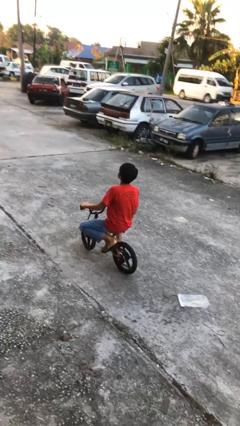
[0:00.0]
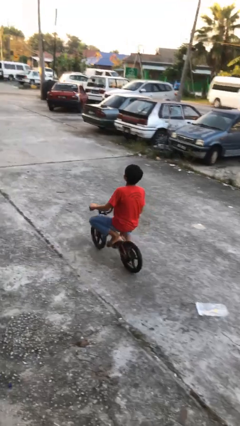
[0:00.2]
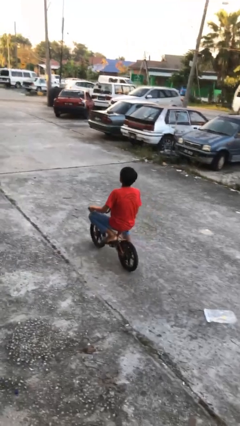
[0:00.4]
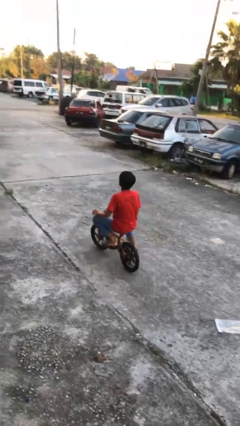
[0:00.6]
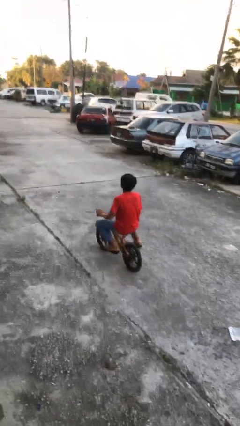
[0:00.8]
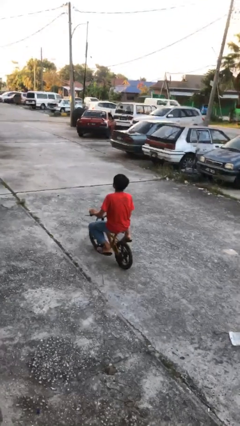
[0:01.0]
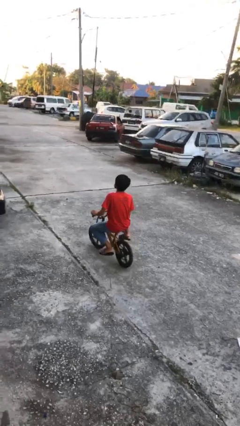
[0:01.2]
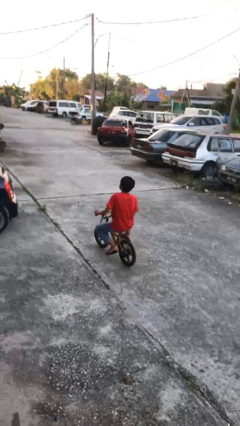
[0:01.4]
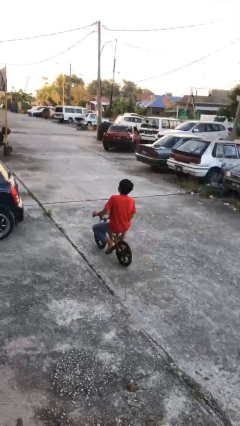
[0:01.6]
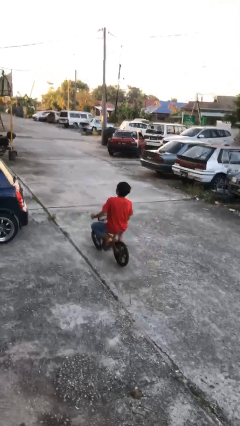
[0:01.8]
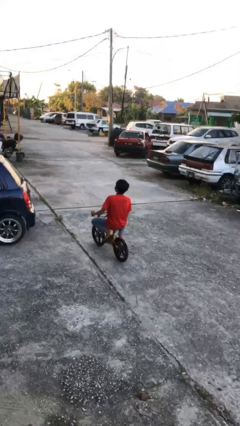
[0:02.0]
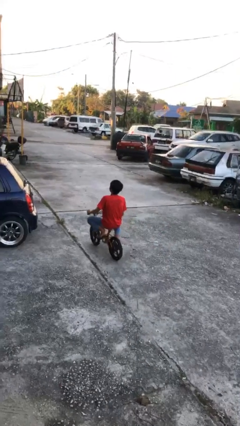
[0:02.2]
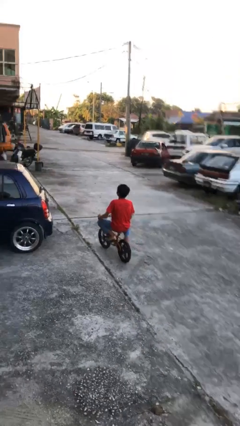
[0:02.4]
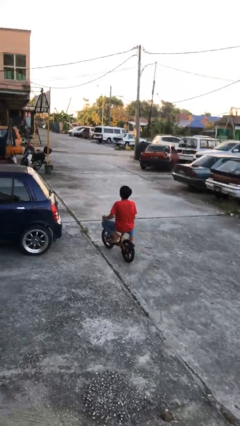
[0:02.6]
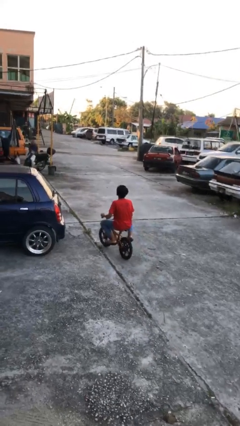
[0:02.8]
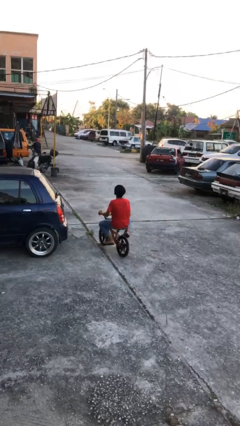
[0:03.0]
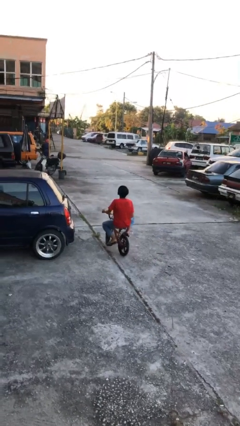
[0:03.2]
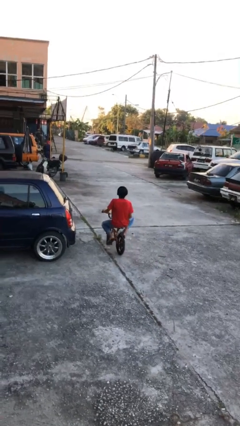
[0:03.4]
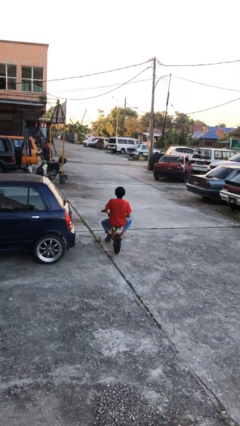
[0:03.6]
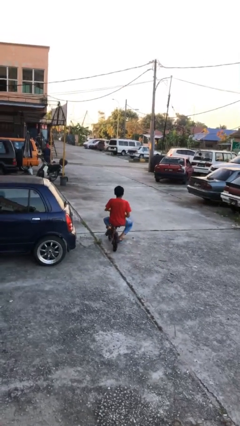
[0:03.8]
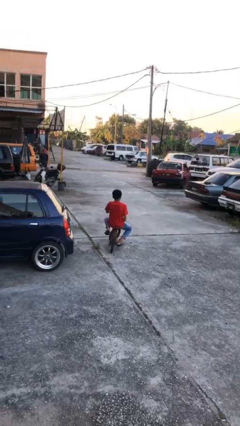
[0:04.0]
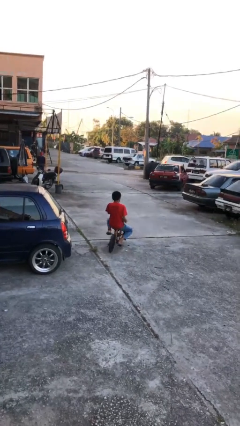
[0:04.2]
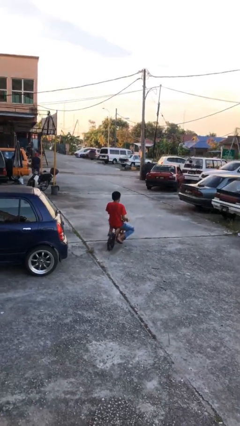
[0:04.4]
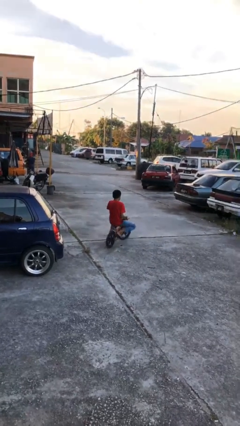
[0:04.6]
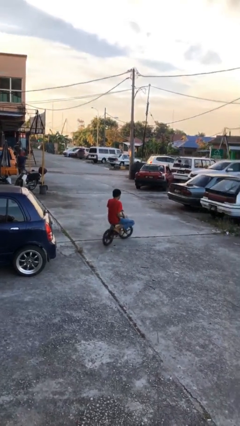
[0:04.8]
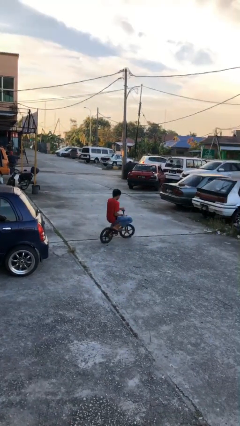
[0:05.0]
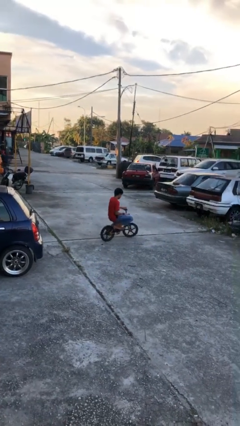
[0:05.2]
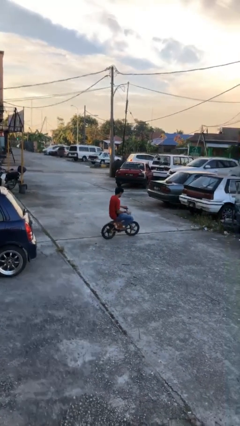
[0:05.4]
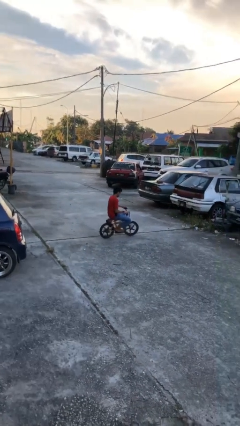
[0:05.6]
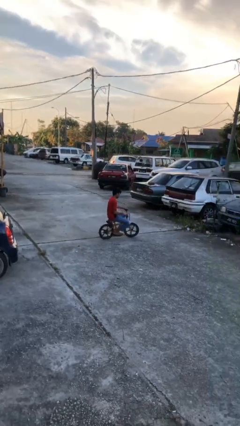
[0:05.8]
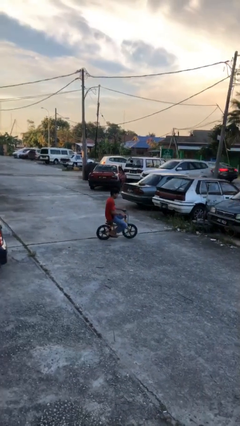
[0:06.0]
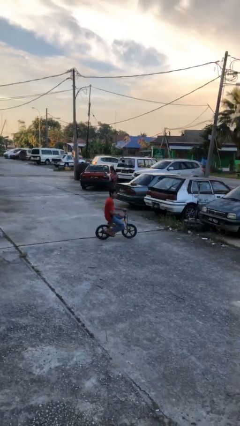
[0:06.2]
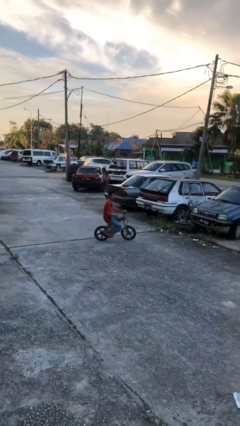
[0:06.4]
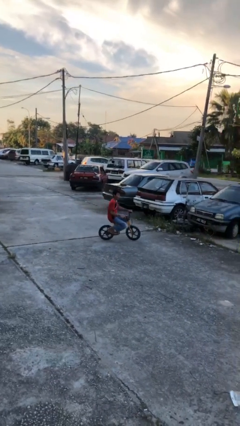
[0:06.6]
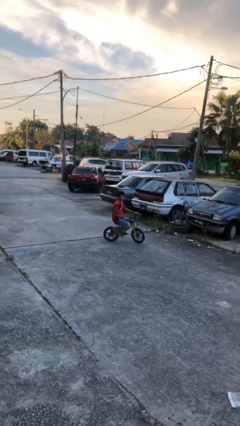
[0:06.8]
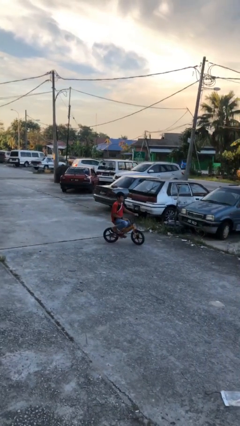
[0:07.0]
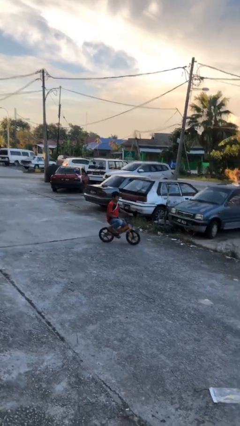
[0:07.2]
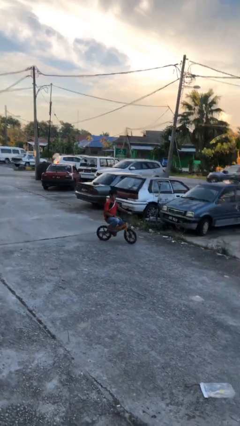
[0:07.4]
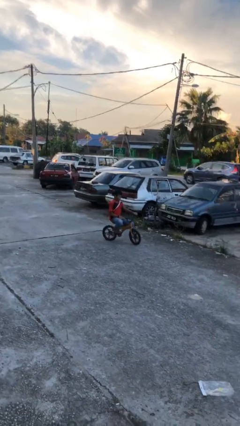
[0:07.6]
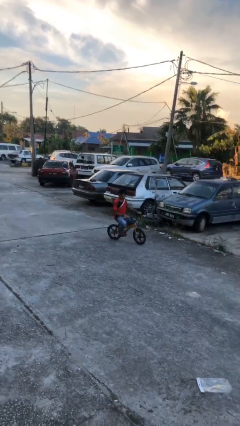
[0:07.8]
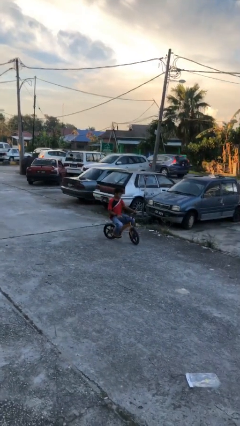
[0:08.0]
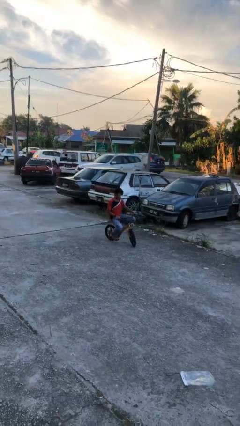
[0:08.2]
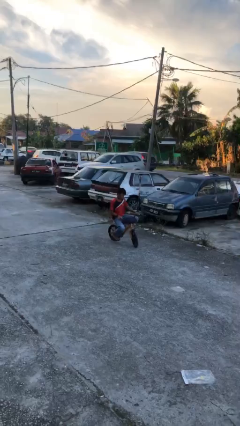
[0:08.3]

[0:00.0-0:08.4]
person rides bicycle

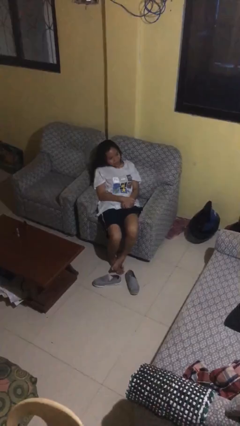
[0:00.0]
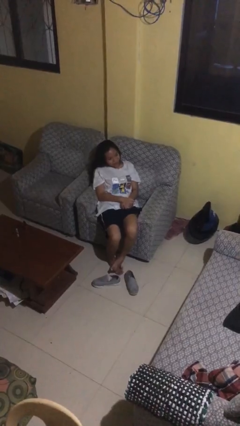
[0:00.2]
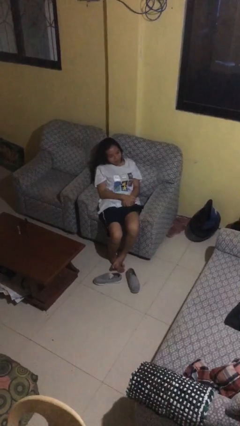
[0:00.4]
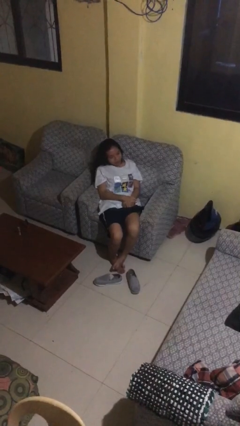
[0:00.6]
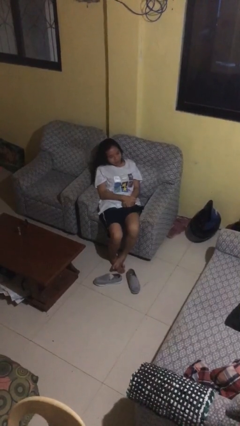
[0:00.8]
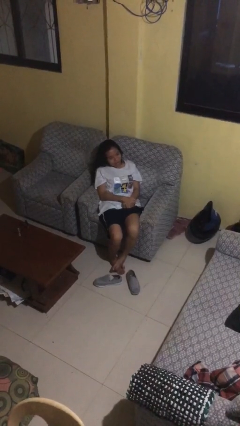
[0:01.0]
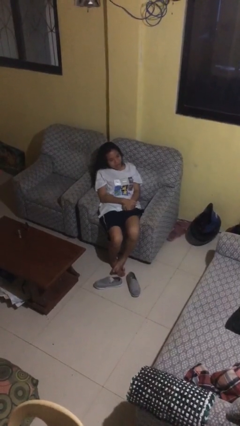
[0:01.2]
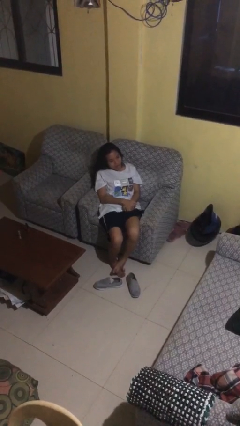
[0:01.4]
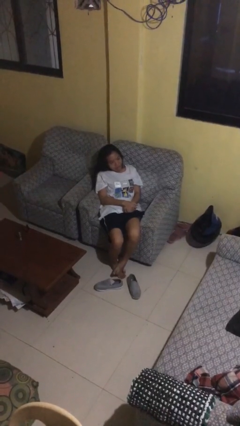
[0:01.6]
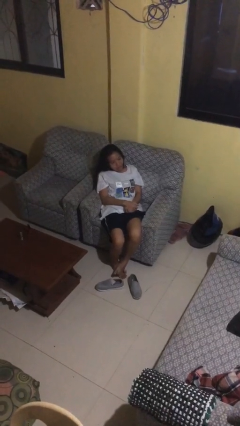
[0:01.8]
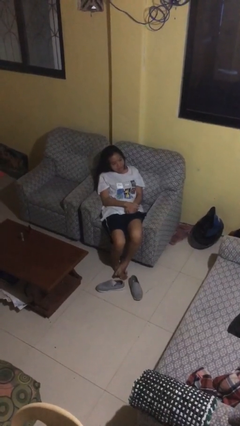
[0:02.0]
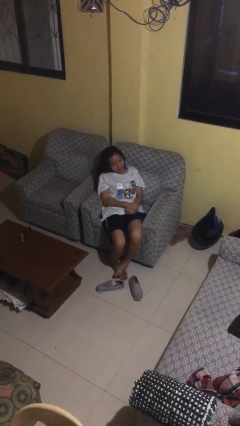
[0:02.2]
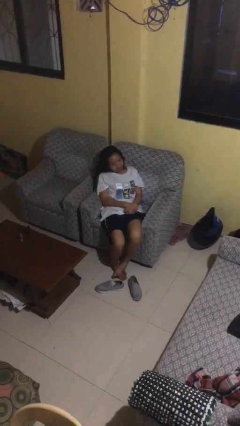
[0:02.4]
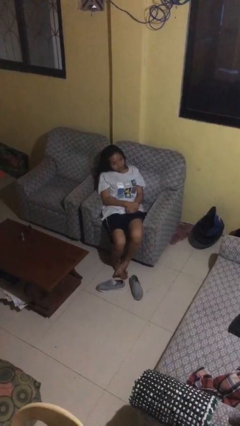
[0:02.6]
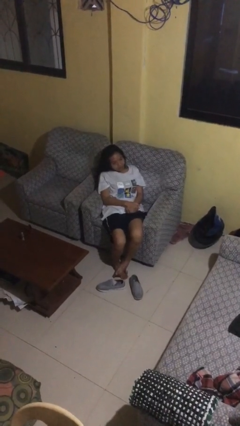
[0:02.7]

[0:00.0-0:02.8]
person sticks out tongue

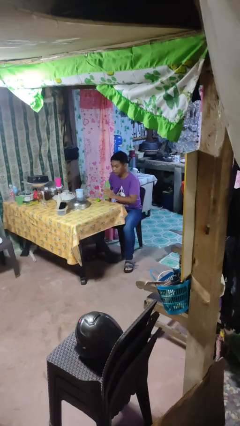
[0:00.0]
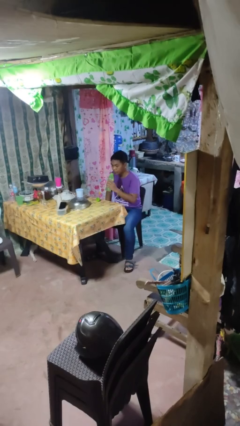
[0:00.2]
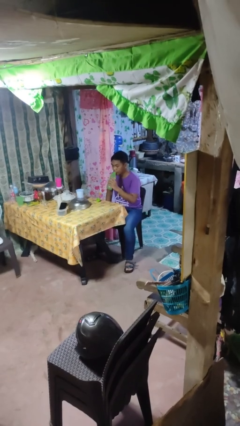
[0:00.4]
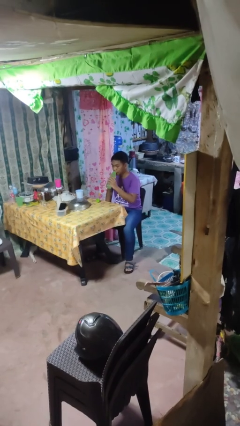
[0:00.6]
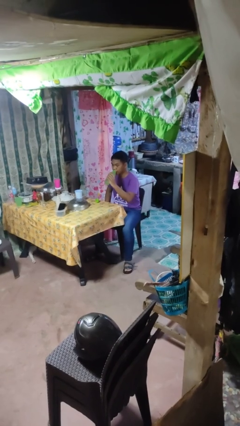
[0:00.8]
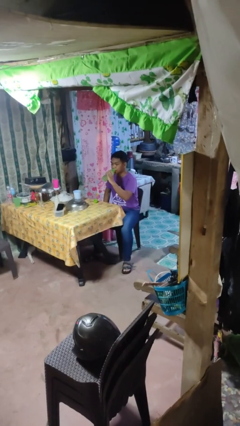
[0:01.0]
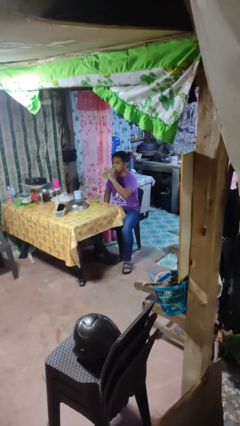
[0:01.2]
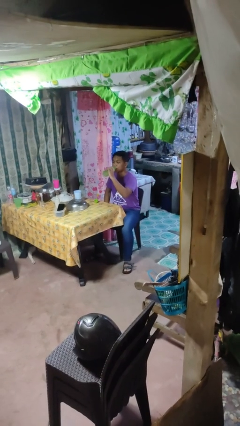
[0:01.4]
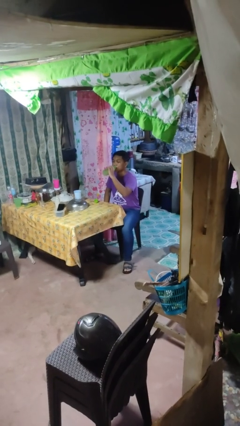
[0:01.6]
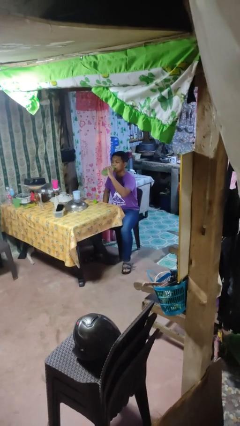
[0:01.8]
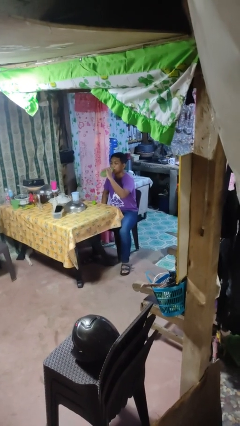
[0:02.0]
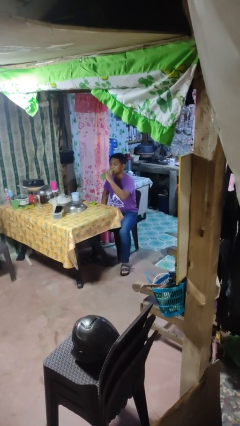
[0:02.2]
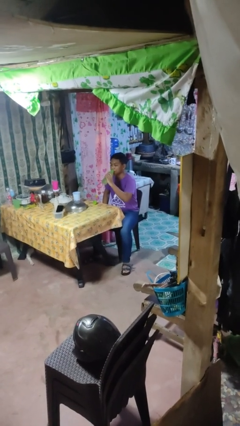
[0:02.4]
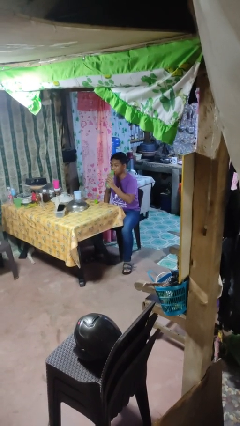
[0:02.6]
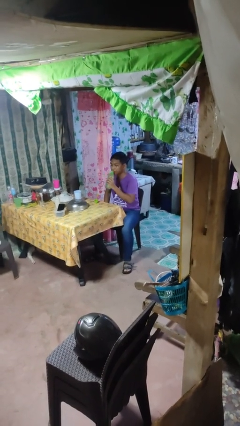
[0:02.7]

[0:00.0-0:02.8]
person drinks from bottle

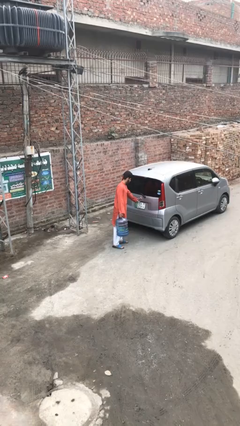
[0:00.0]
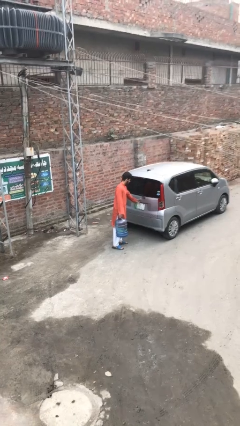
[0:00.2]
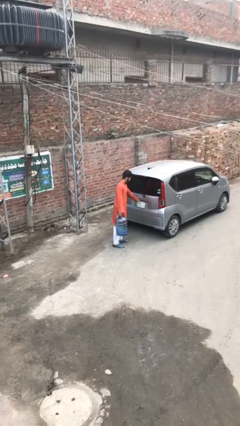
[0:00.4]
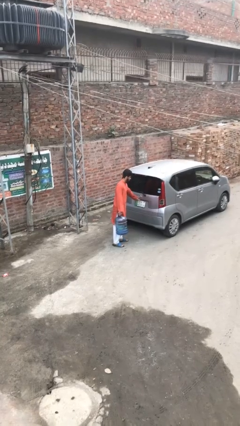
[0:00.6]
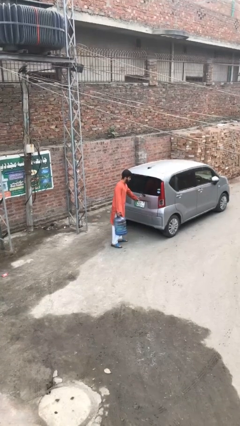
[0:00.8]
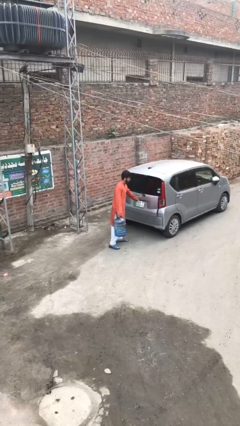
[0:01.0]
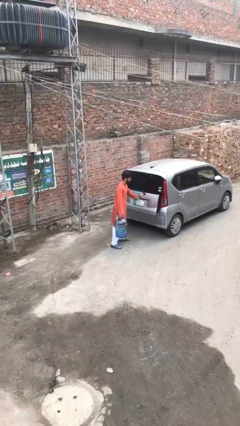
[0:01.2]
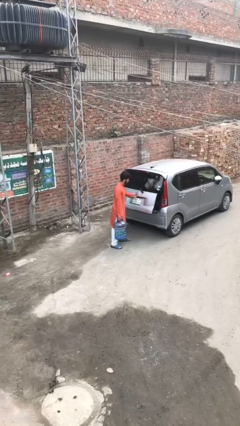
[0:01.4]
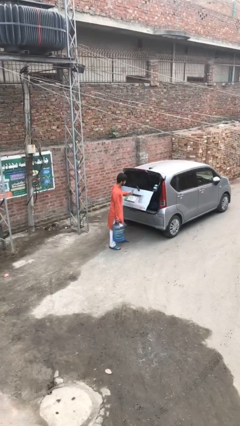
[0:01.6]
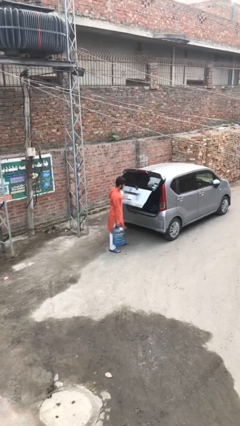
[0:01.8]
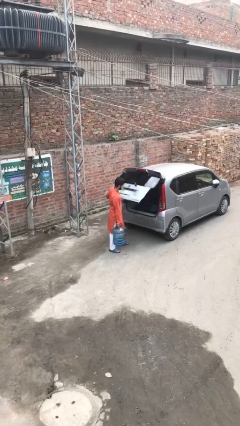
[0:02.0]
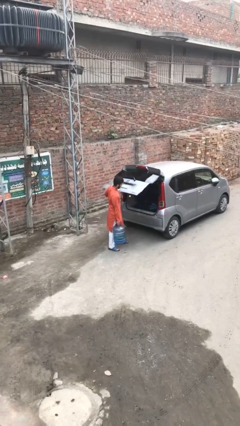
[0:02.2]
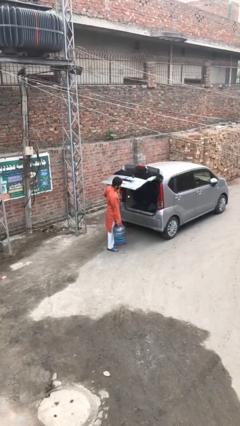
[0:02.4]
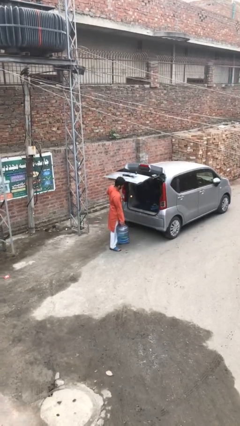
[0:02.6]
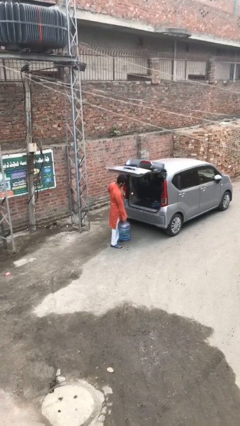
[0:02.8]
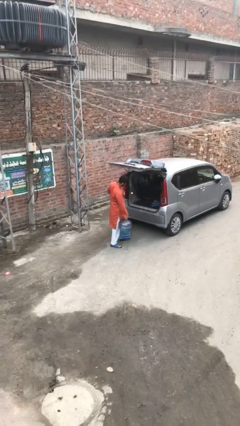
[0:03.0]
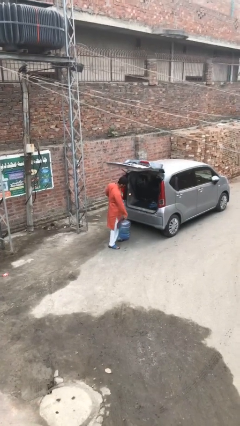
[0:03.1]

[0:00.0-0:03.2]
person opens car trunk
